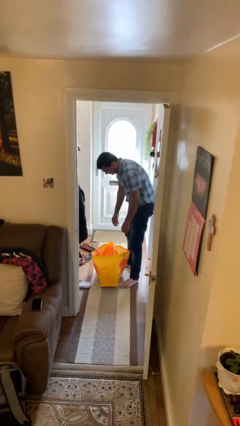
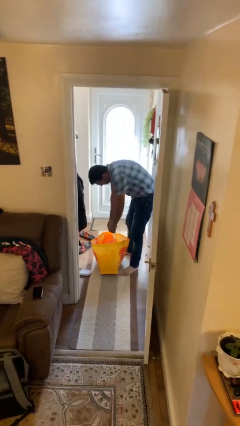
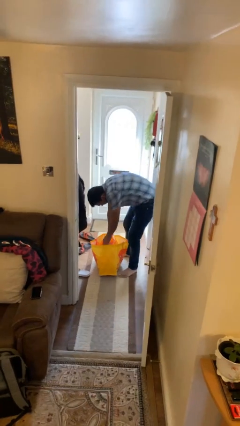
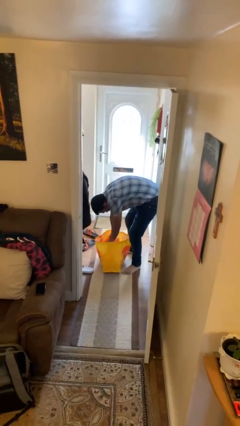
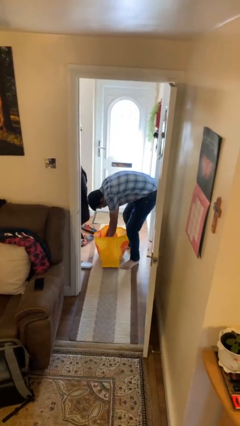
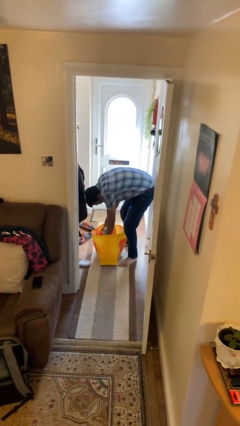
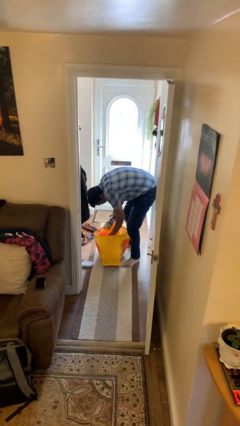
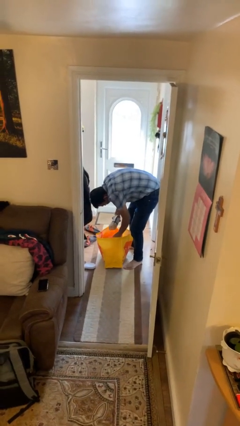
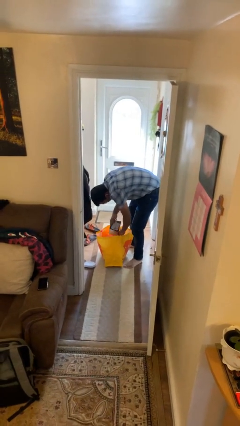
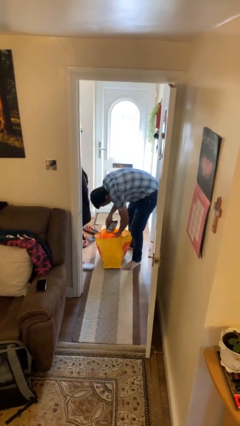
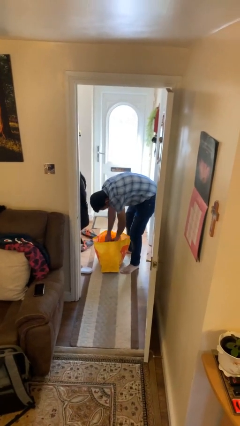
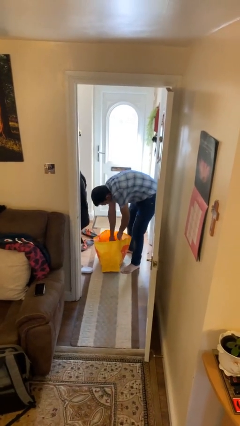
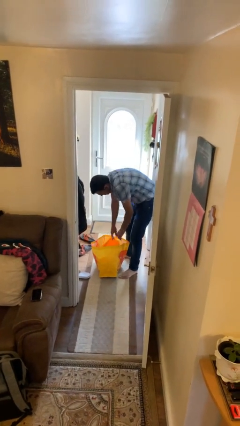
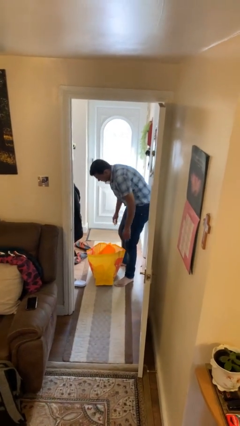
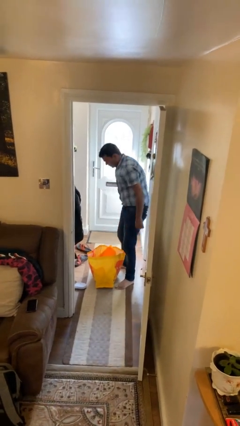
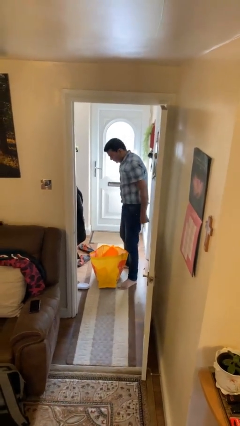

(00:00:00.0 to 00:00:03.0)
person searches in bag

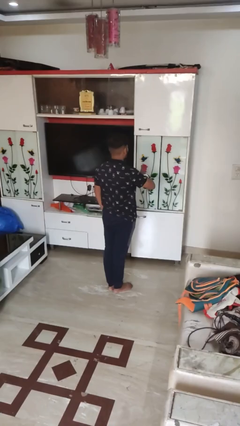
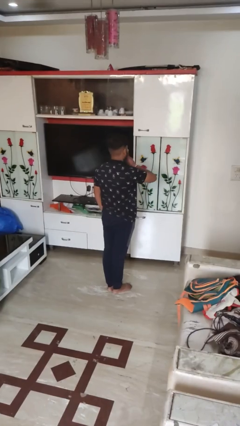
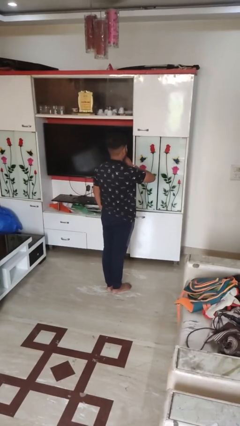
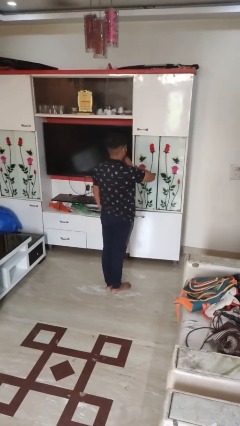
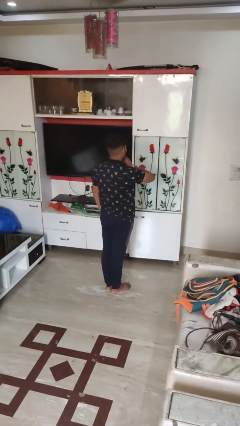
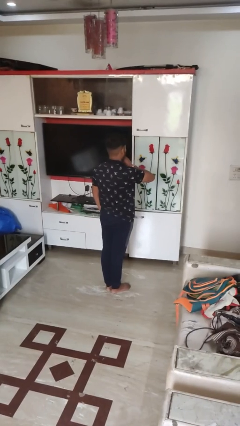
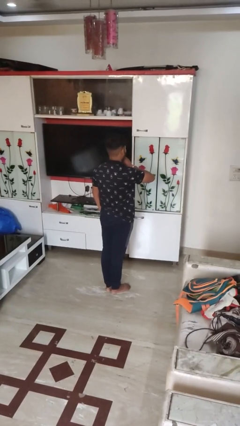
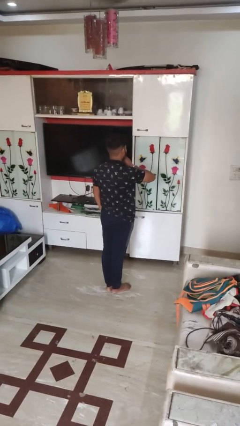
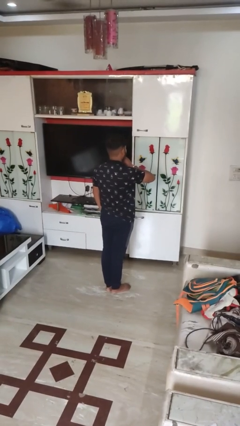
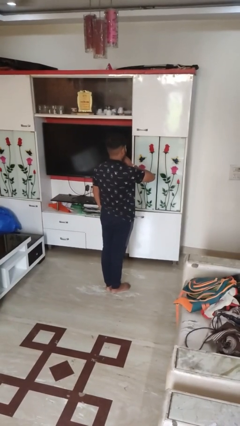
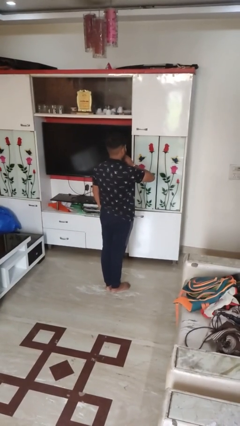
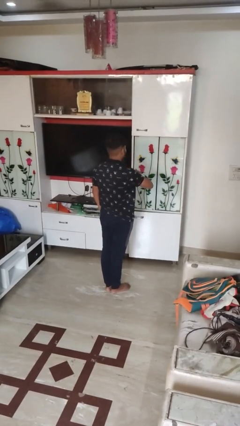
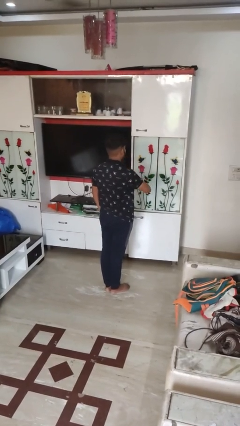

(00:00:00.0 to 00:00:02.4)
person gestures be quiet

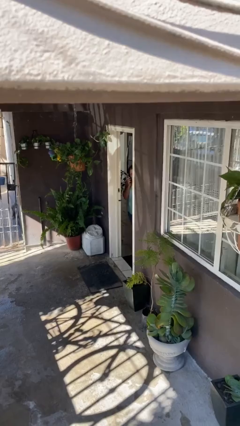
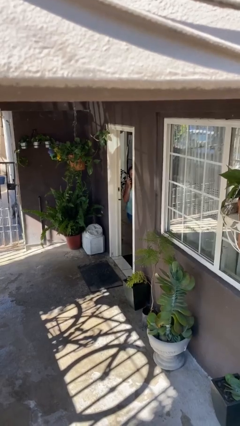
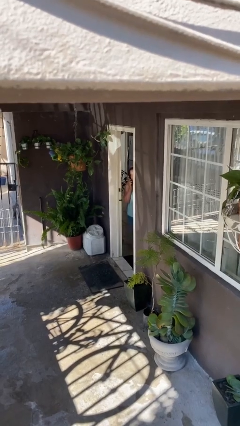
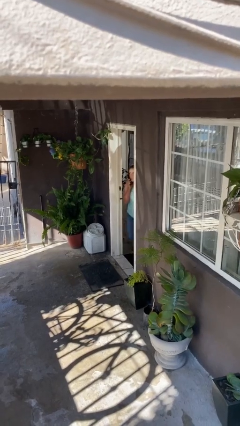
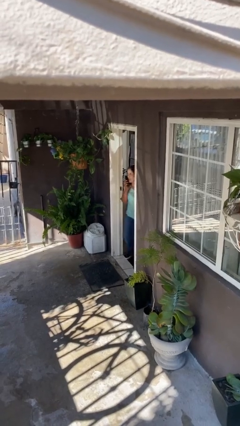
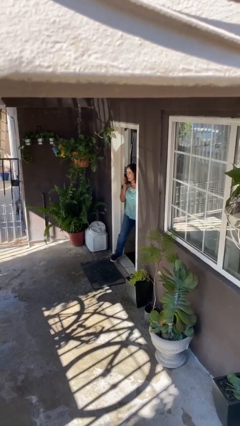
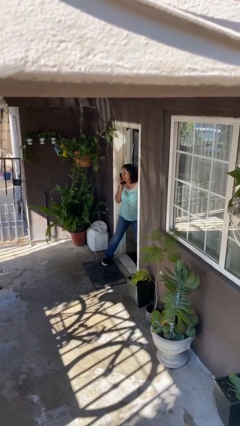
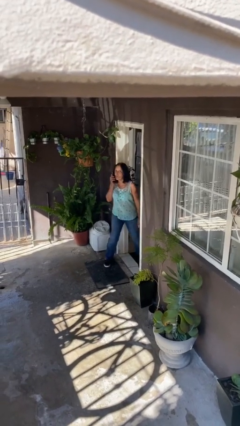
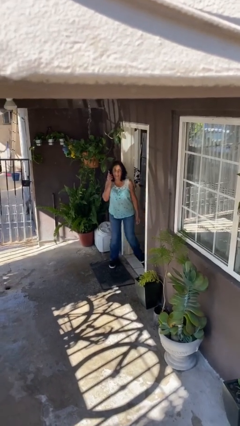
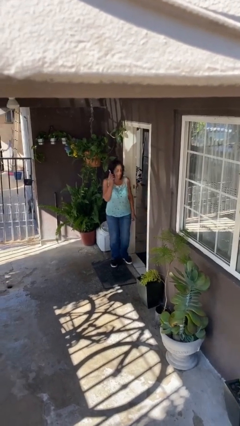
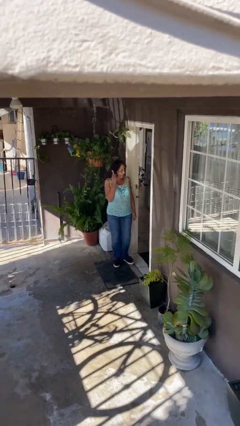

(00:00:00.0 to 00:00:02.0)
person enters scene through structure

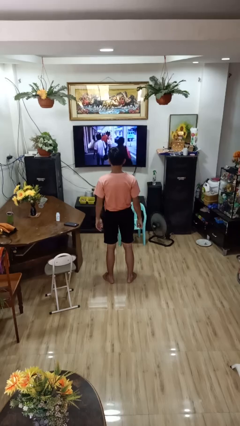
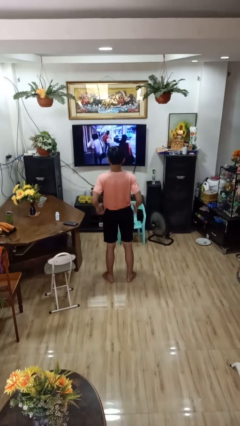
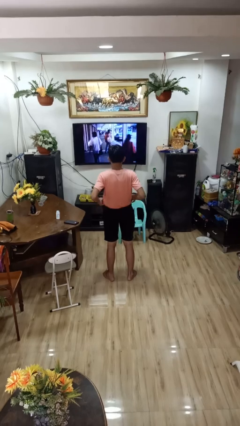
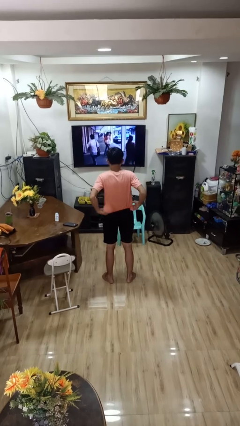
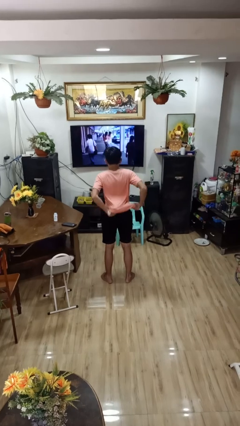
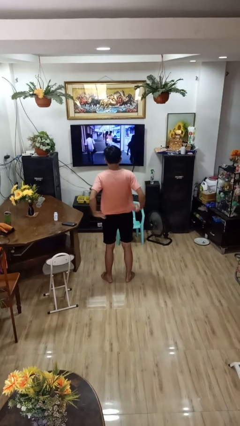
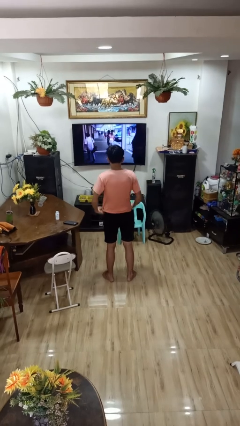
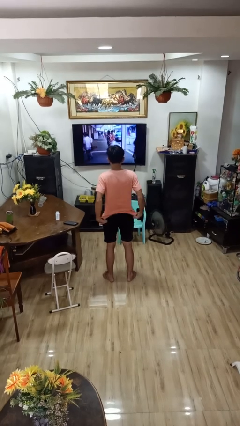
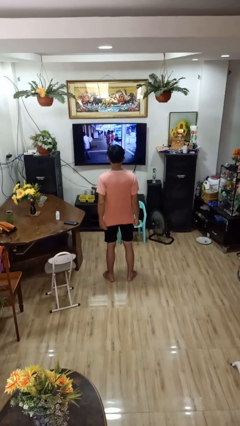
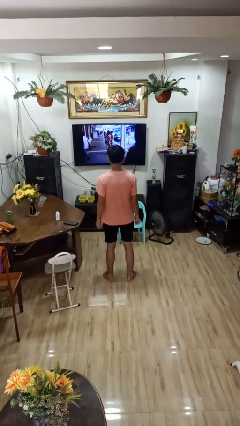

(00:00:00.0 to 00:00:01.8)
person untucks shirt

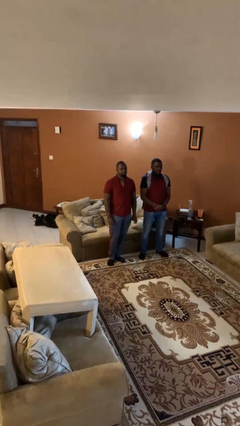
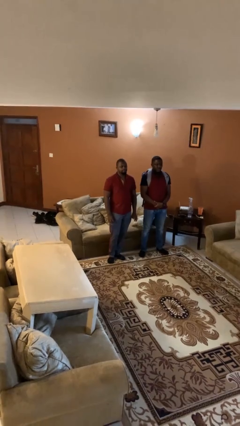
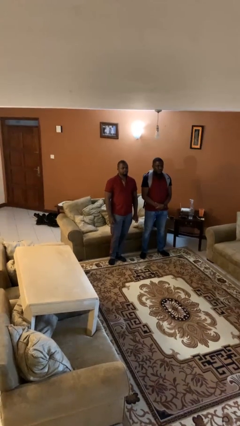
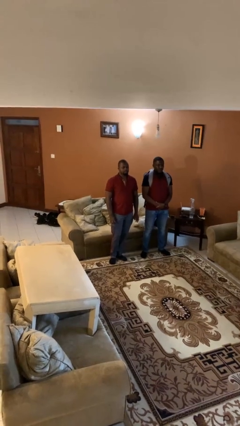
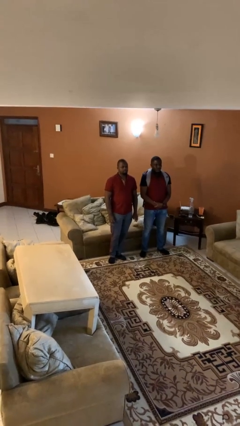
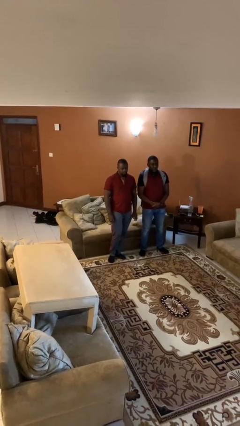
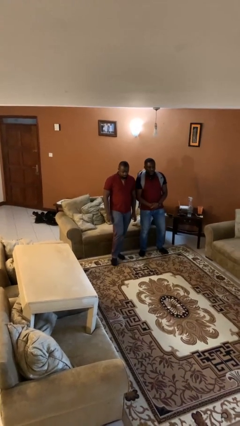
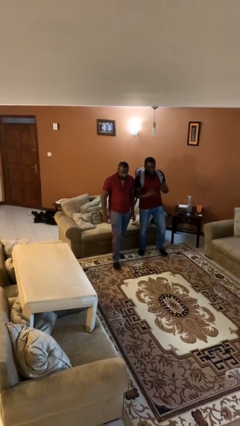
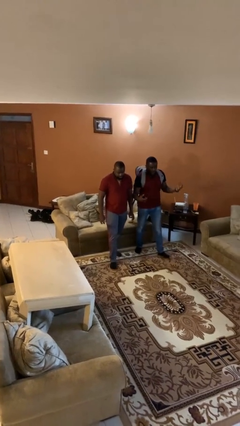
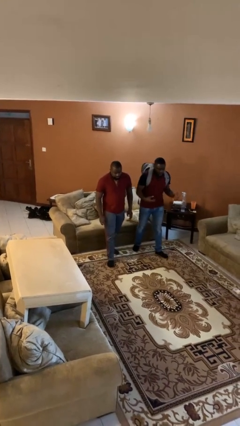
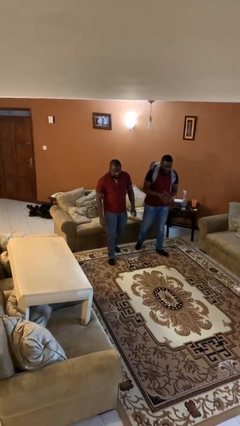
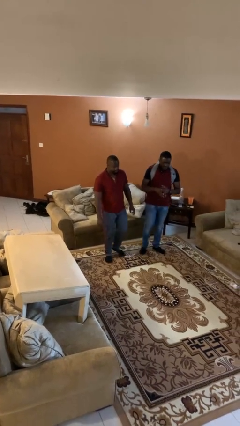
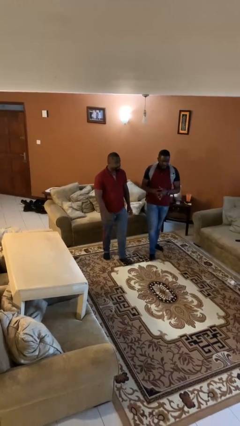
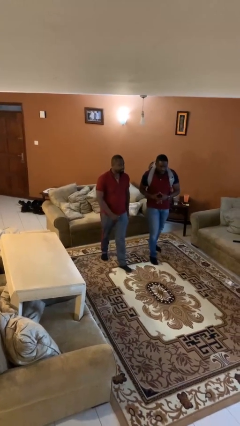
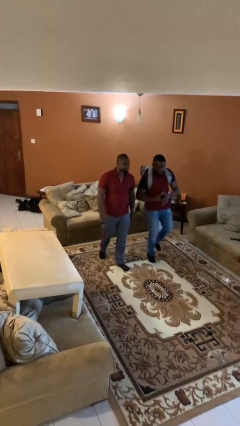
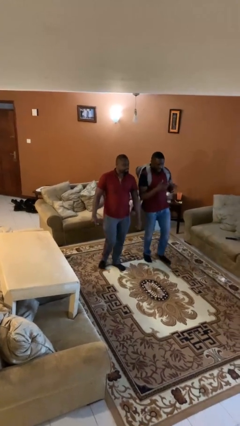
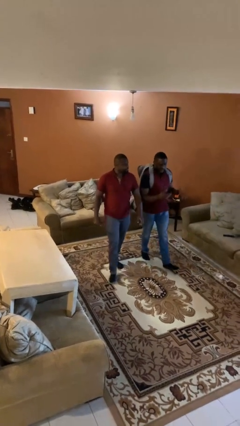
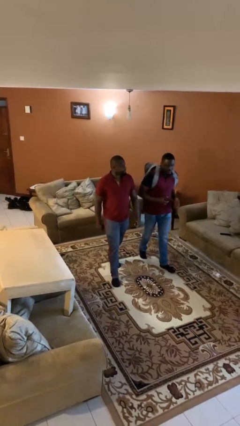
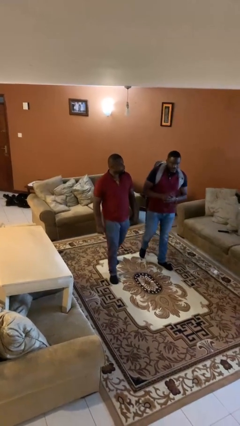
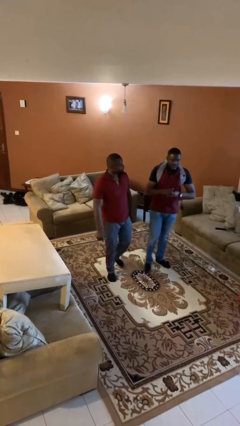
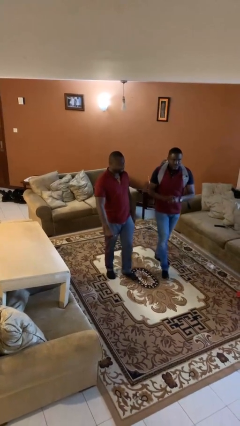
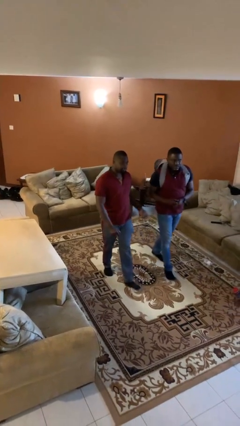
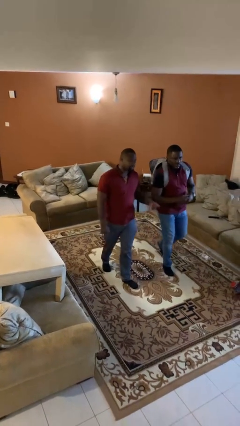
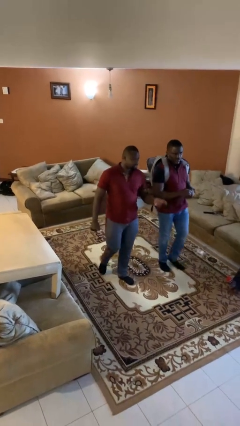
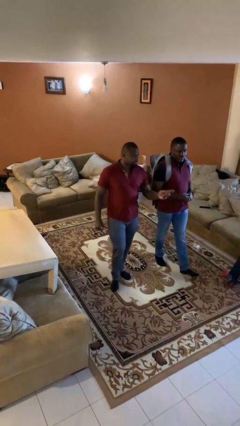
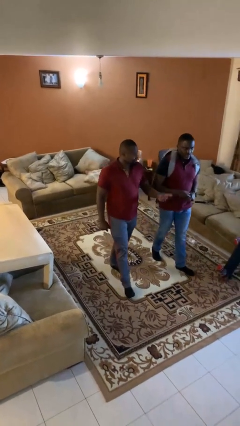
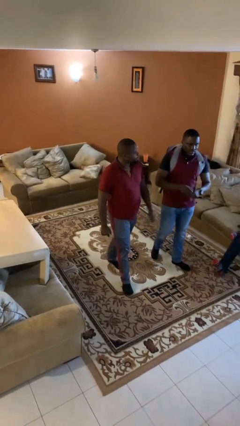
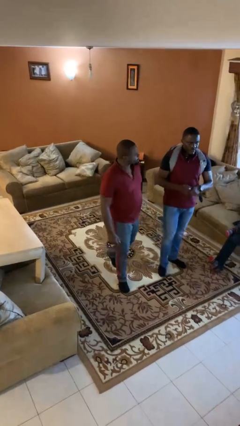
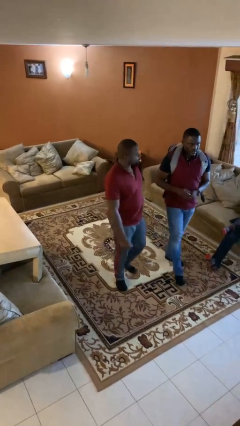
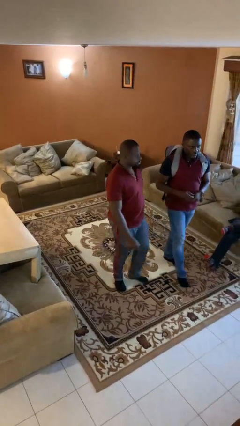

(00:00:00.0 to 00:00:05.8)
person talks to person

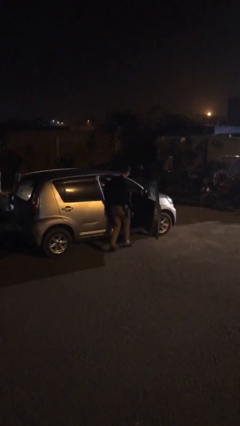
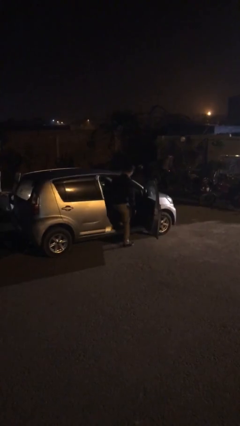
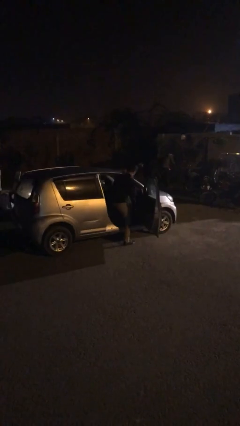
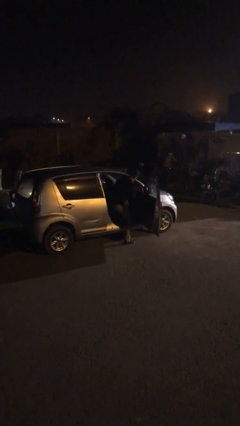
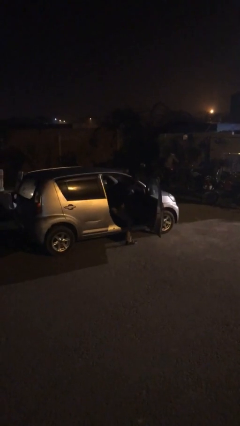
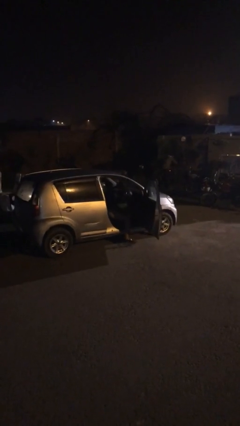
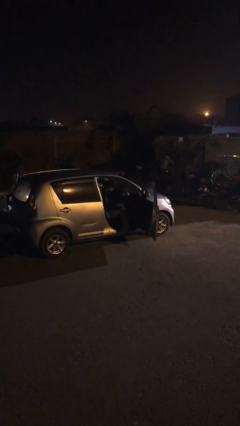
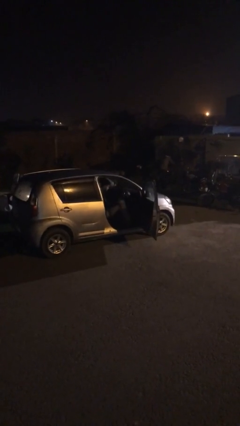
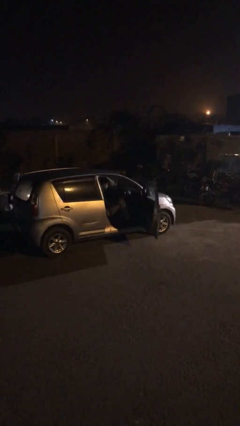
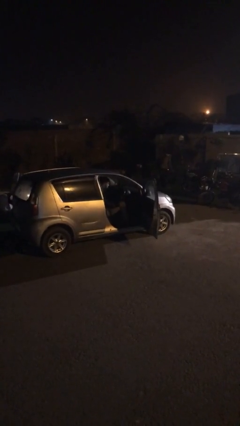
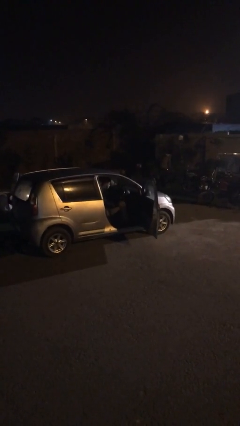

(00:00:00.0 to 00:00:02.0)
person enters car
